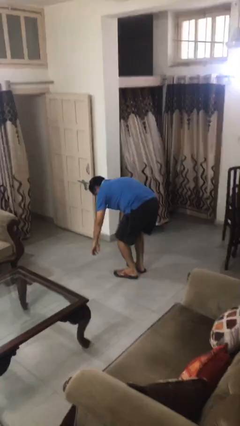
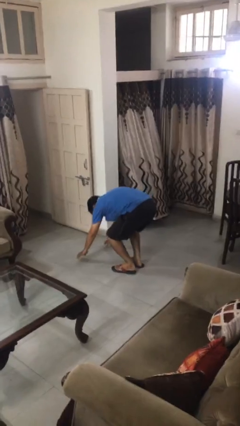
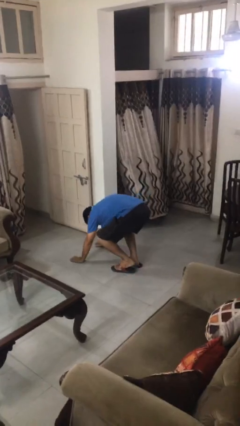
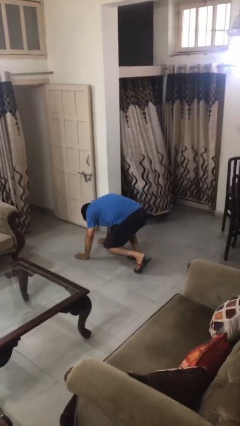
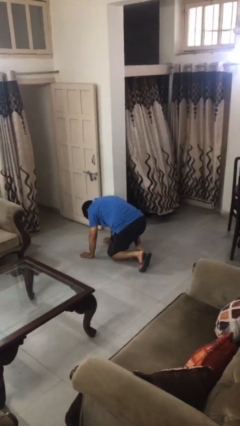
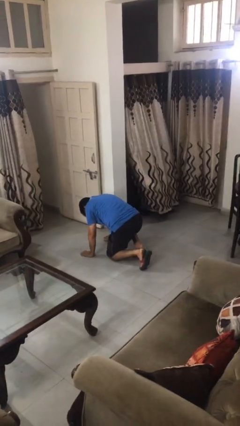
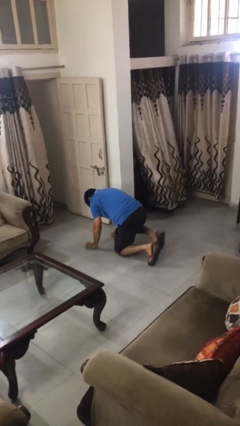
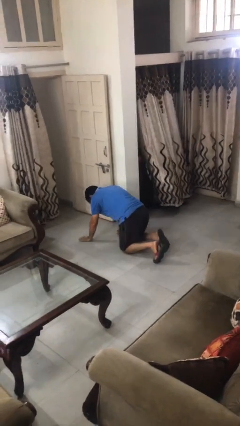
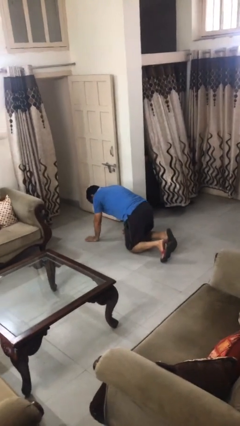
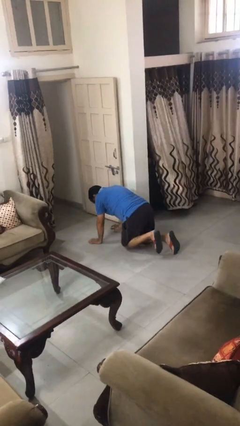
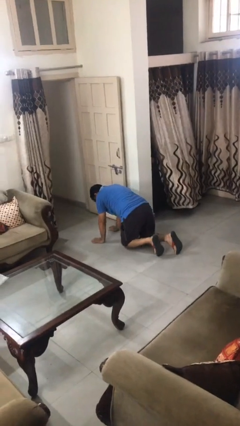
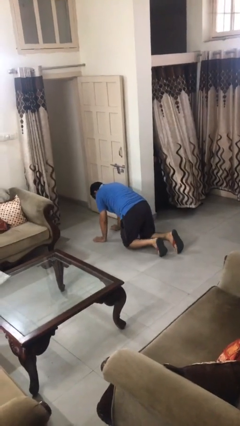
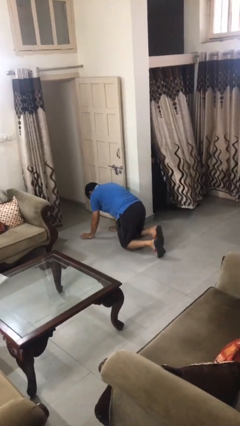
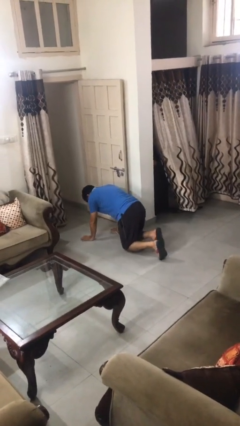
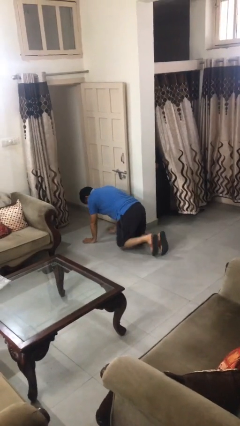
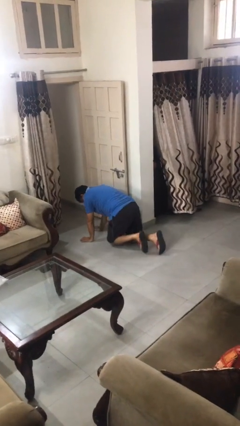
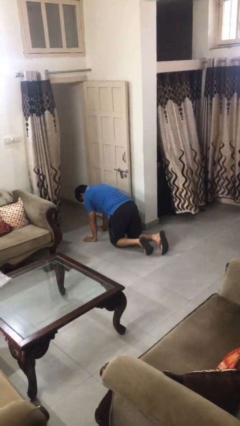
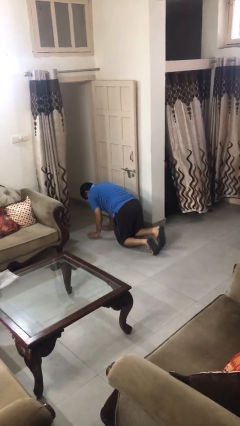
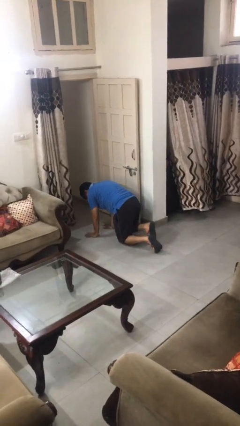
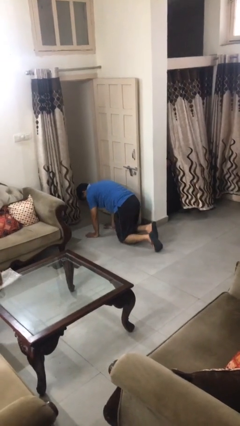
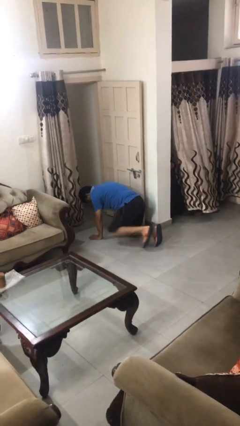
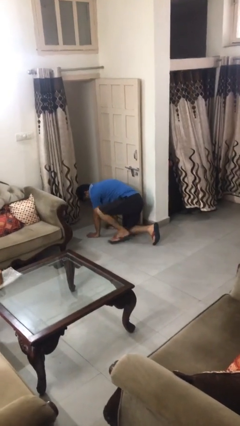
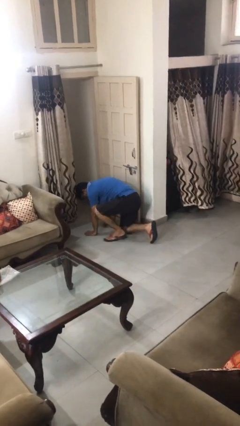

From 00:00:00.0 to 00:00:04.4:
person crawls

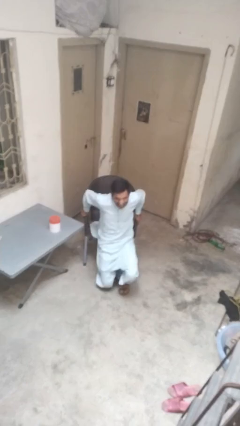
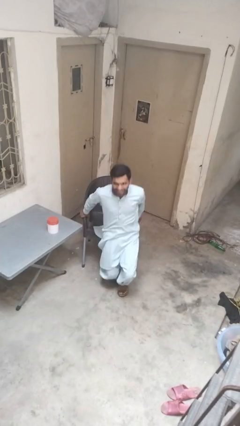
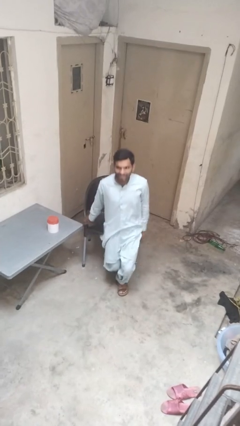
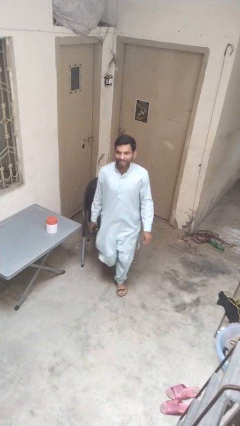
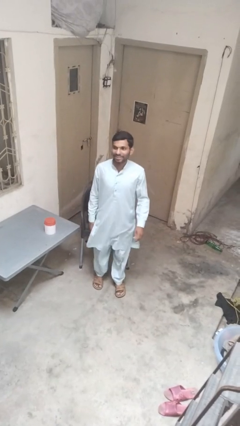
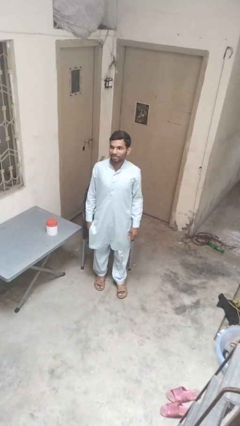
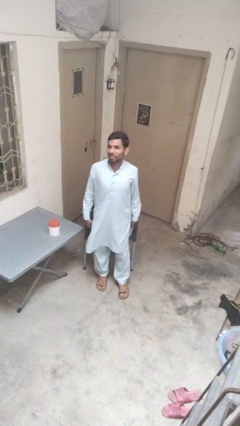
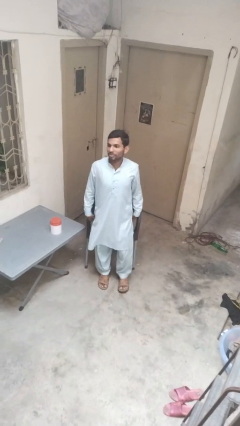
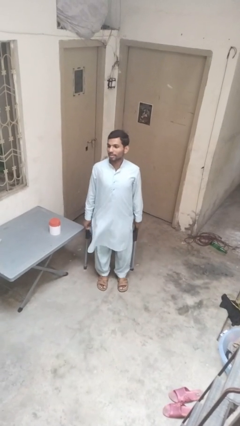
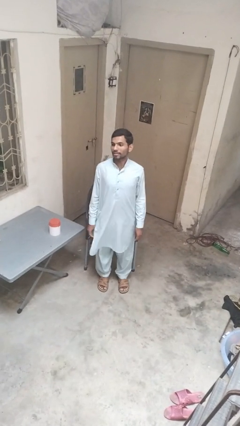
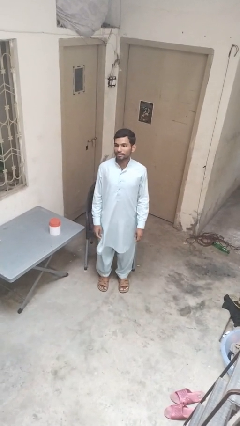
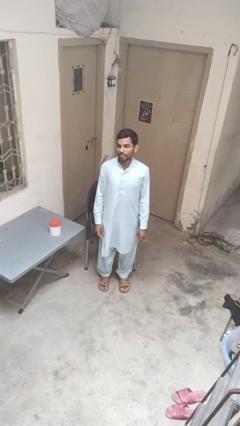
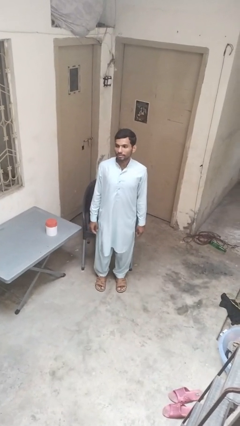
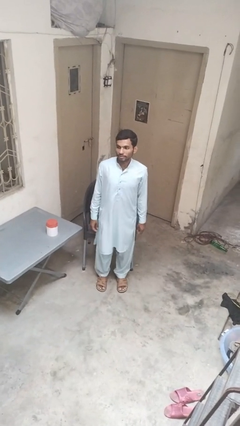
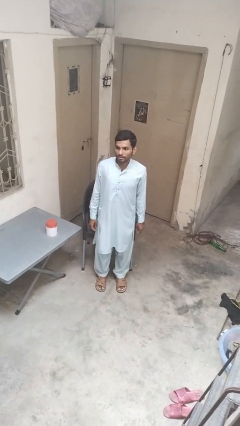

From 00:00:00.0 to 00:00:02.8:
person stands up from floor

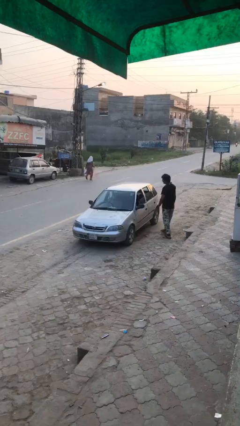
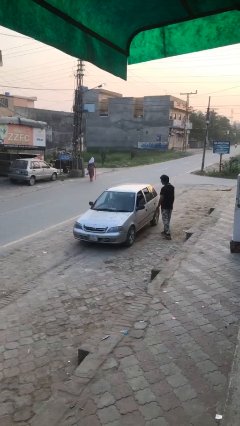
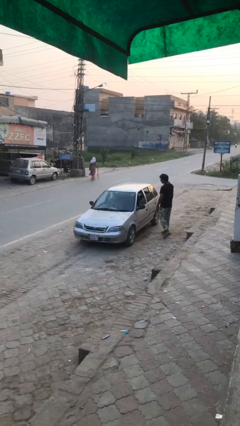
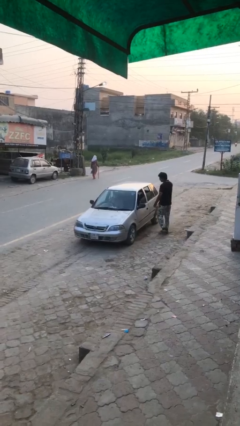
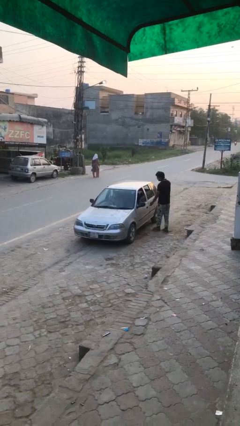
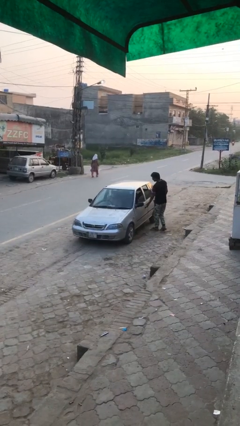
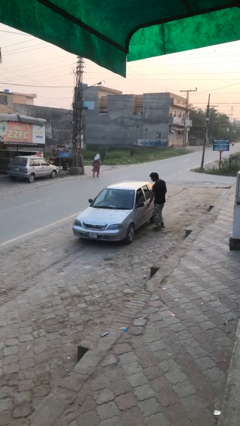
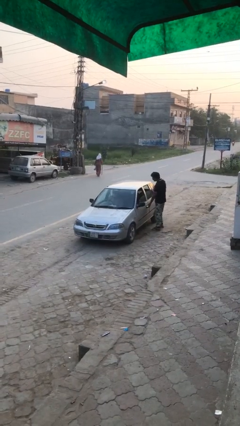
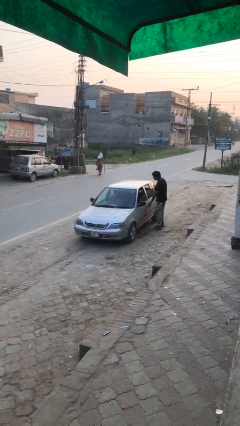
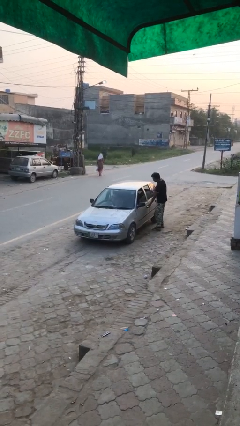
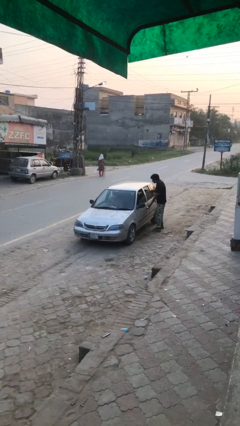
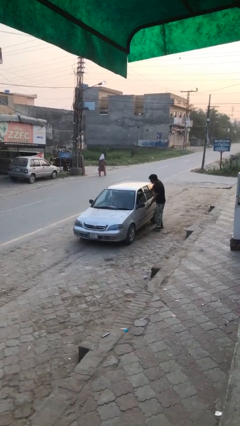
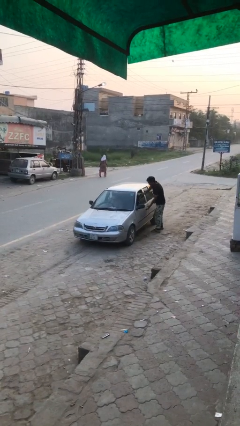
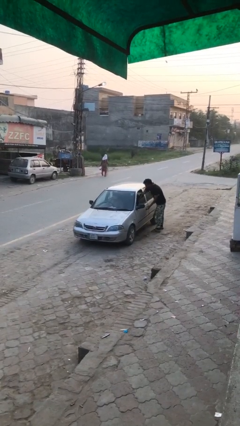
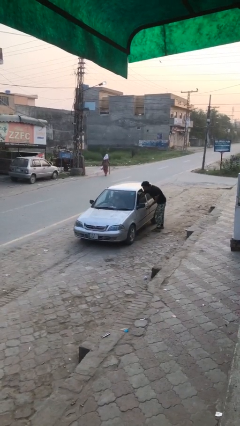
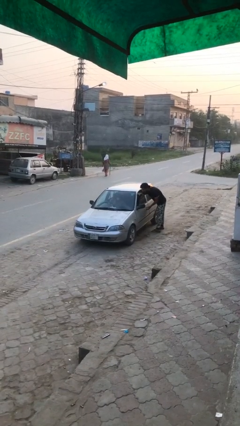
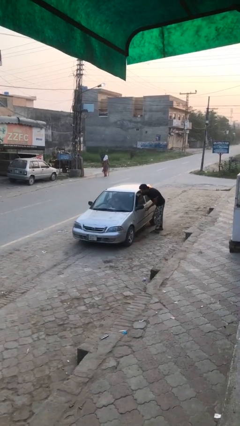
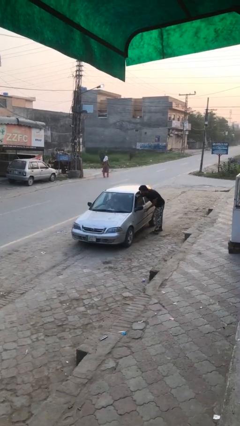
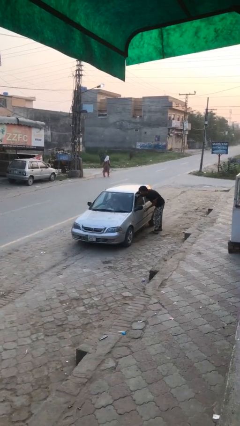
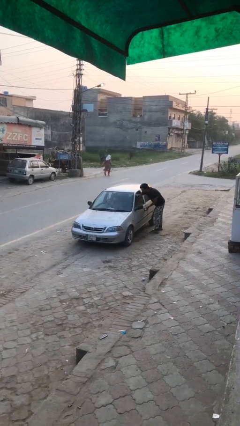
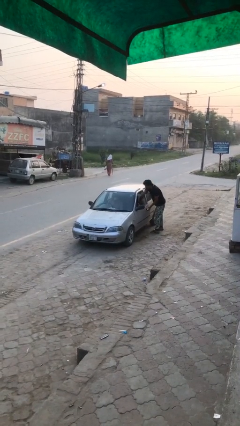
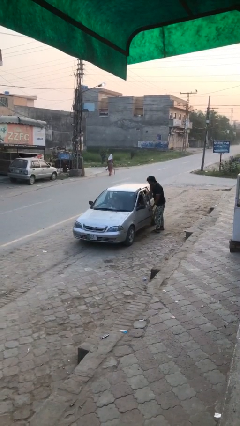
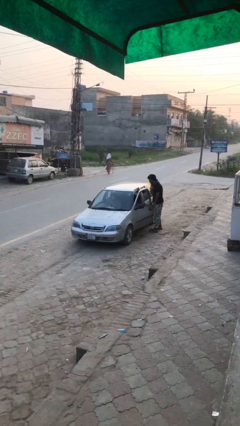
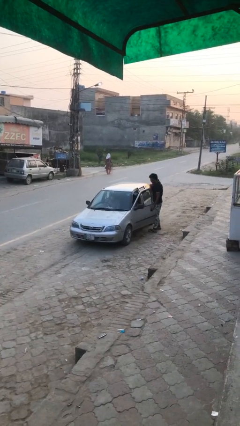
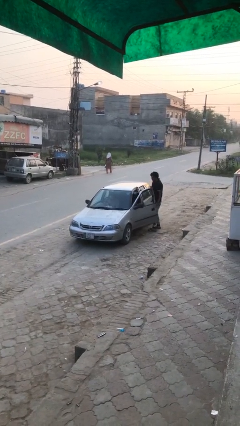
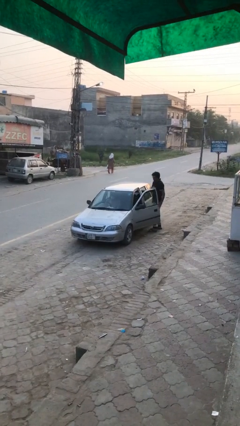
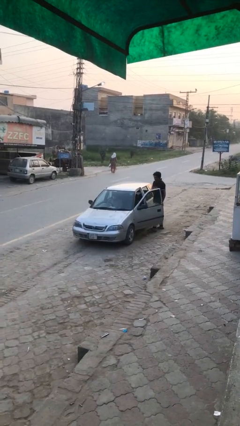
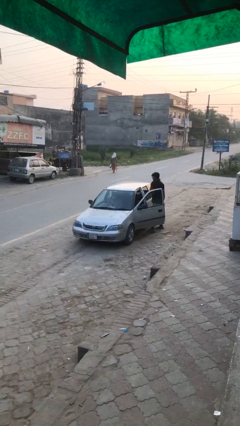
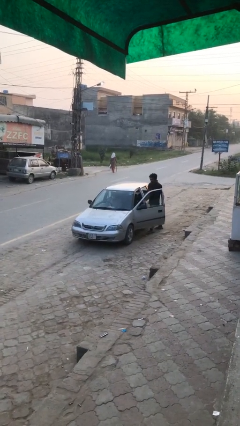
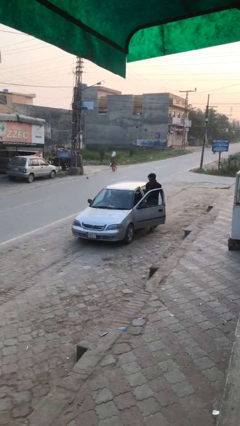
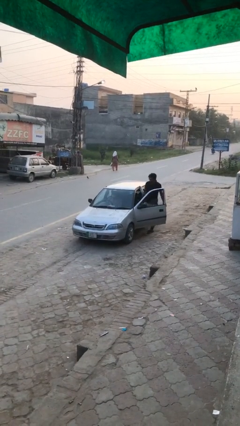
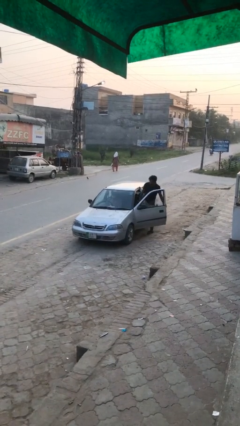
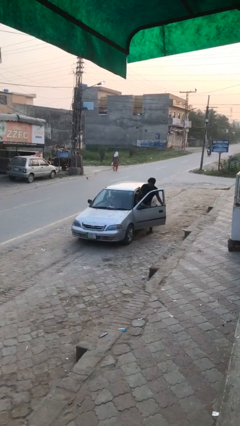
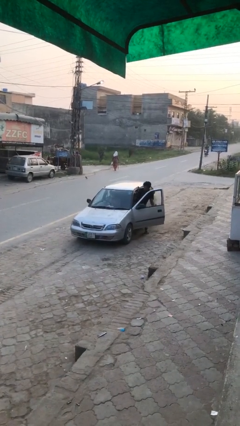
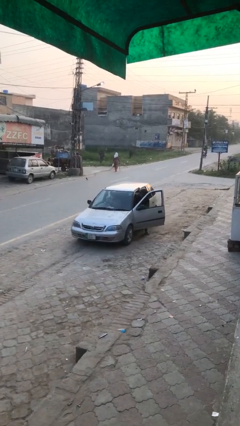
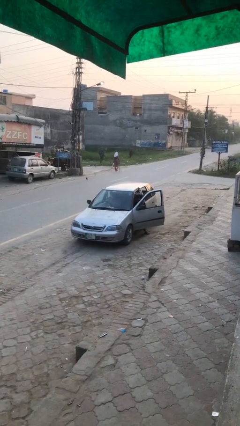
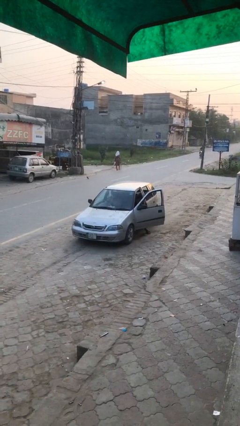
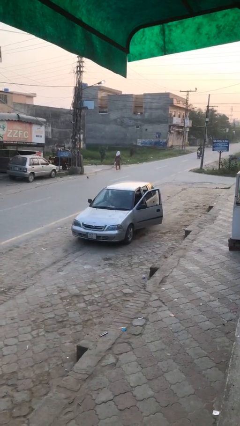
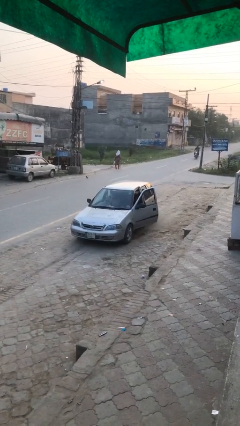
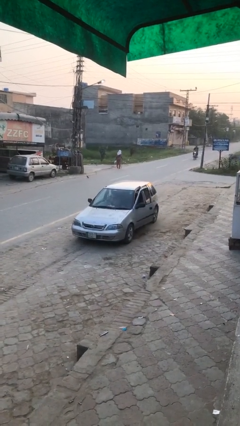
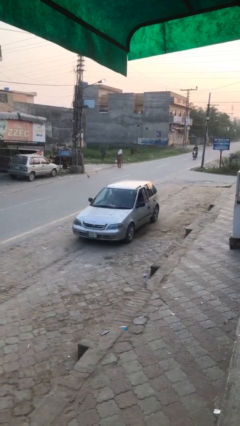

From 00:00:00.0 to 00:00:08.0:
car picks up person

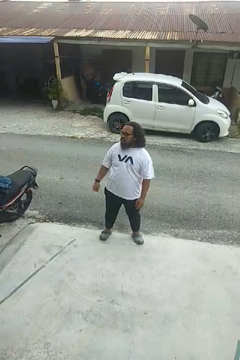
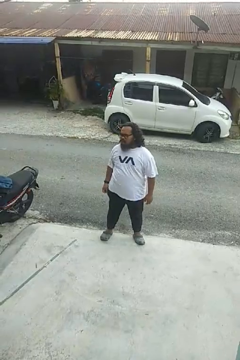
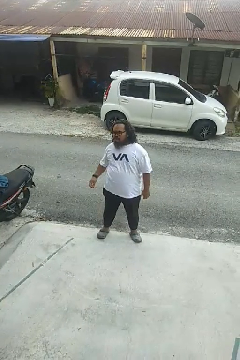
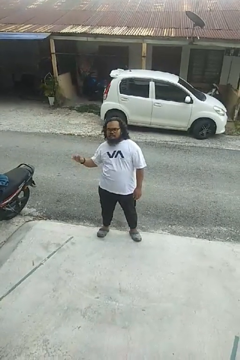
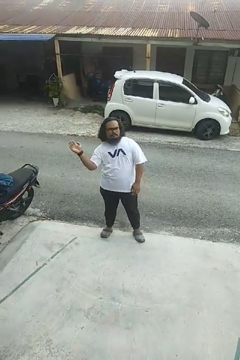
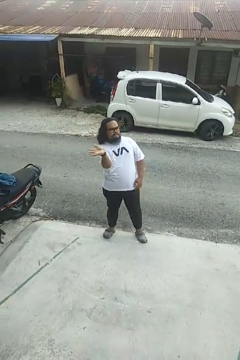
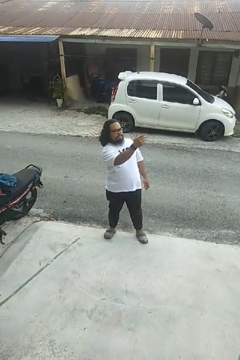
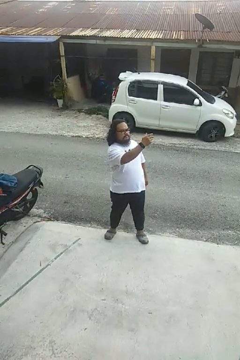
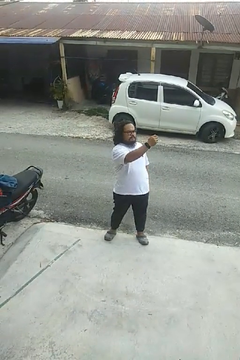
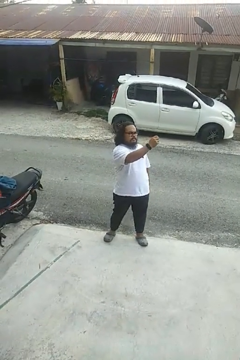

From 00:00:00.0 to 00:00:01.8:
person gestures swipe left

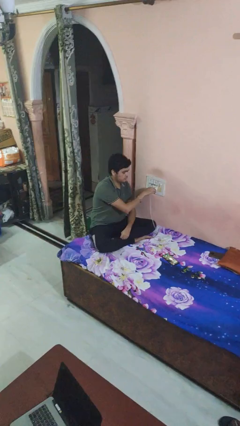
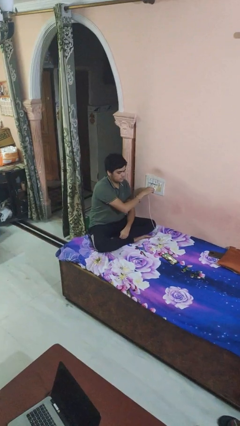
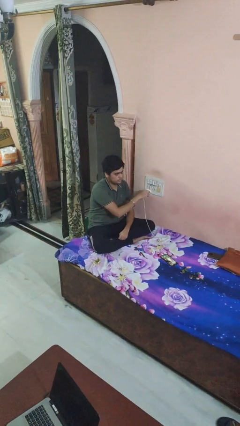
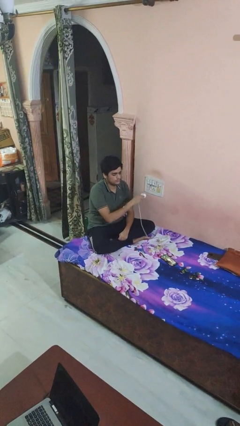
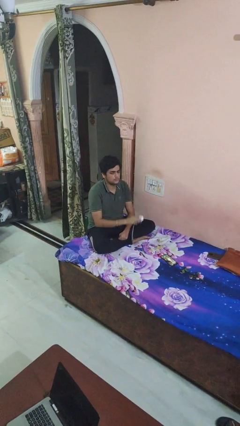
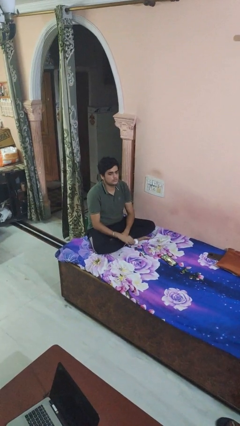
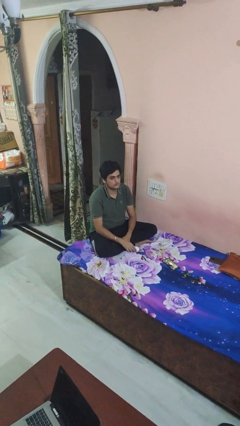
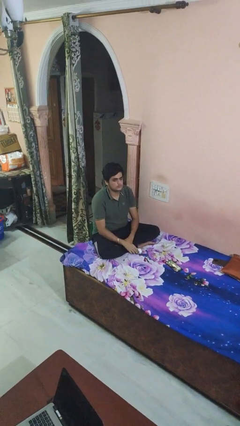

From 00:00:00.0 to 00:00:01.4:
person unplugs from electrical socket
